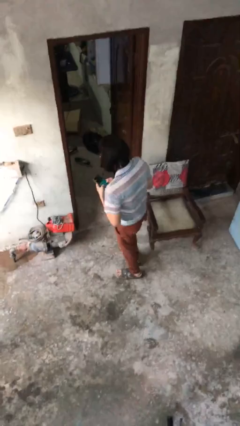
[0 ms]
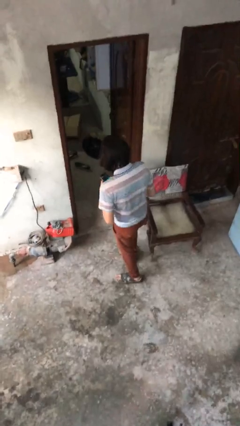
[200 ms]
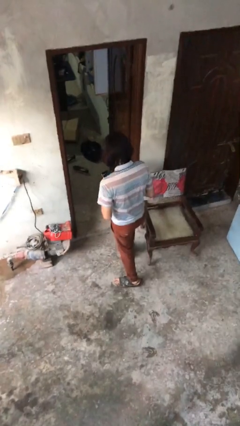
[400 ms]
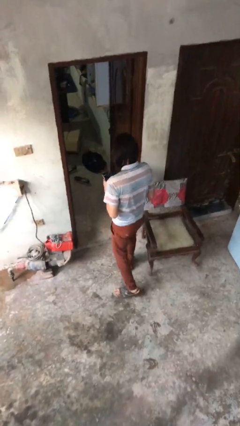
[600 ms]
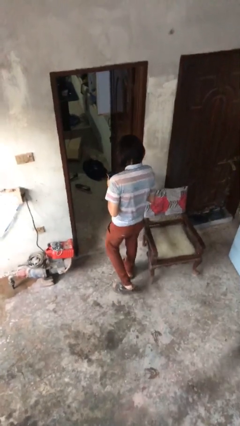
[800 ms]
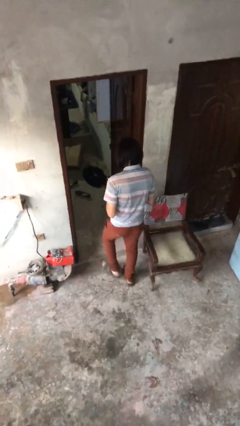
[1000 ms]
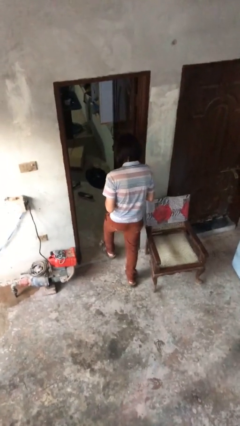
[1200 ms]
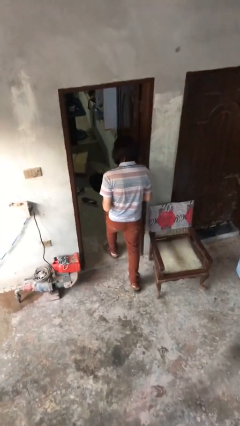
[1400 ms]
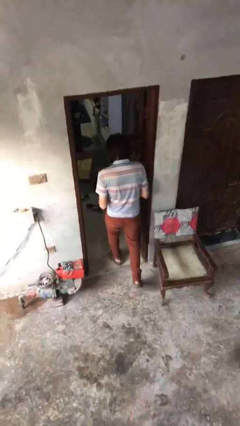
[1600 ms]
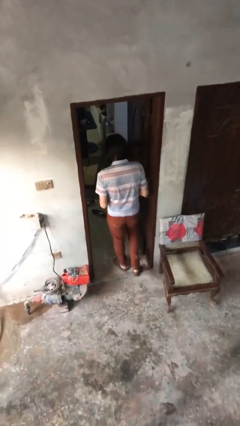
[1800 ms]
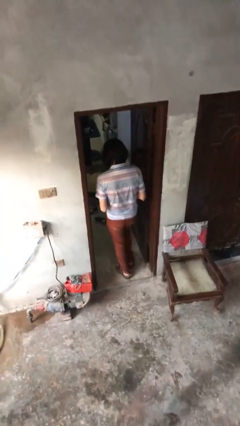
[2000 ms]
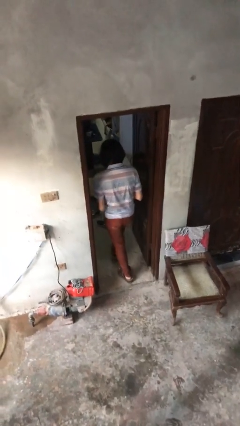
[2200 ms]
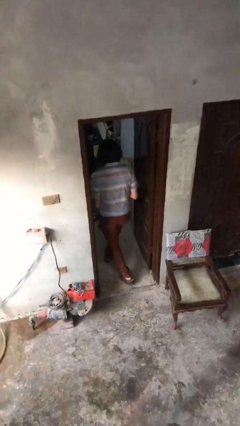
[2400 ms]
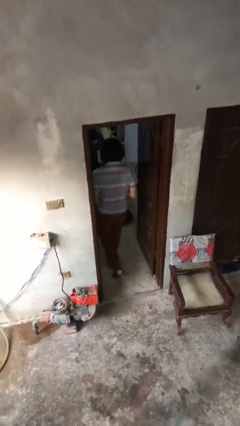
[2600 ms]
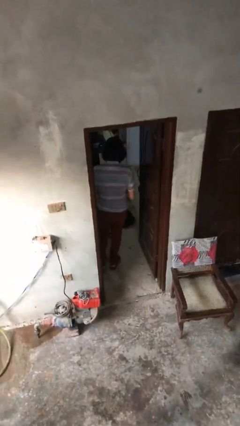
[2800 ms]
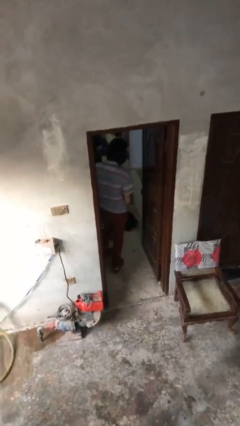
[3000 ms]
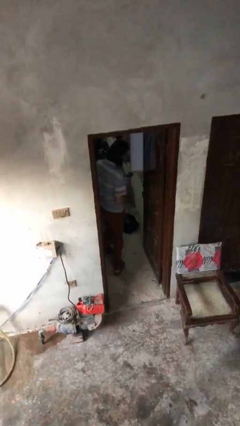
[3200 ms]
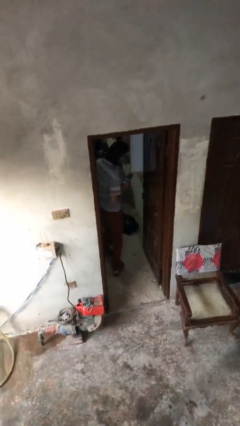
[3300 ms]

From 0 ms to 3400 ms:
person enters scene through structure

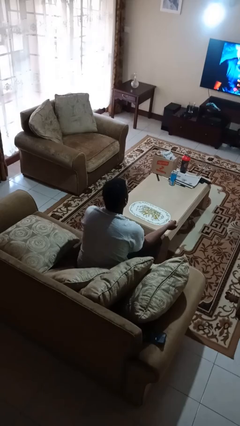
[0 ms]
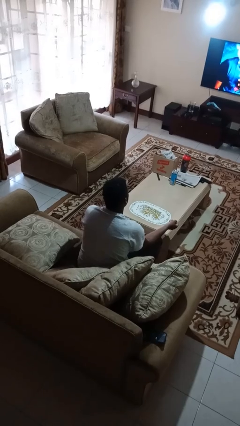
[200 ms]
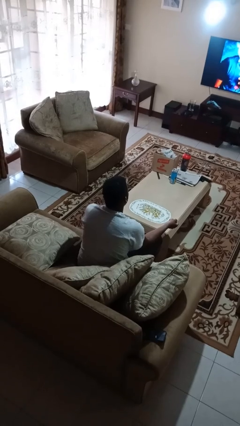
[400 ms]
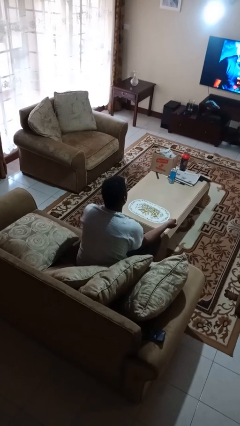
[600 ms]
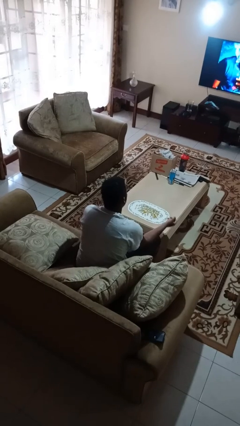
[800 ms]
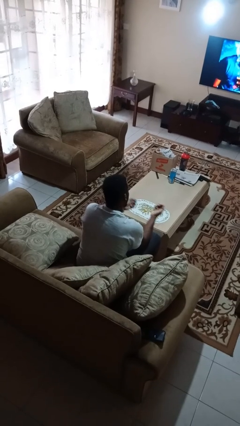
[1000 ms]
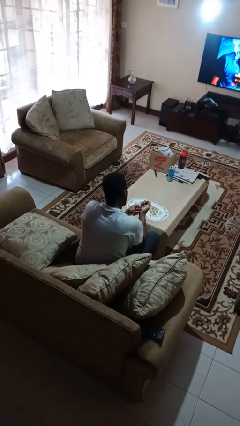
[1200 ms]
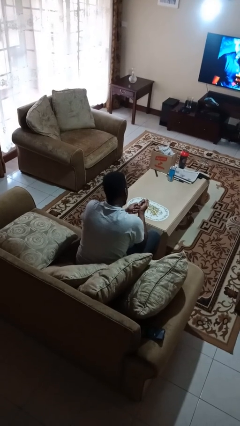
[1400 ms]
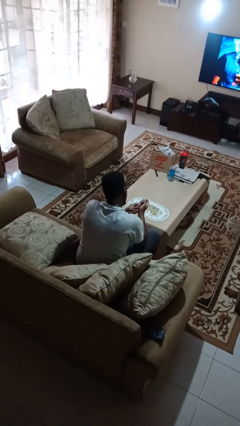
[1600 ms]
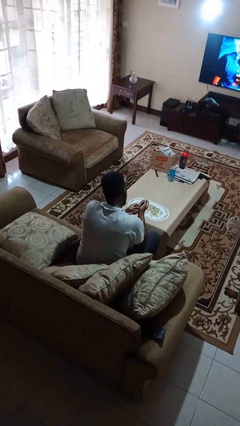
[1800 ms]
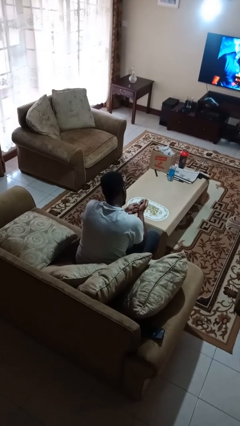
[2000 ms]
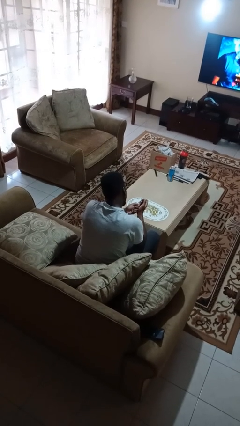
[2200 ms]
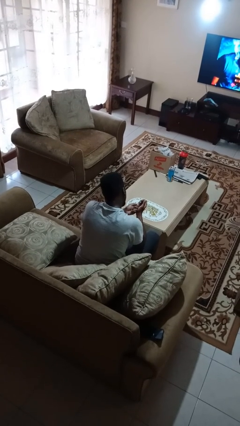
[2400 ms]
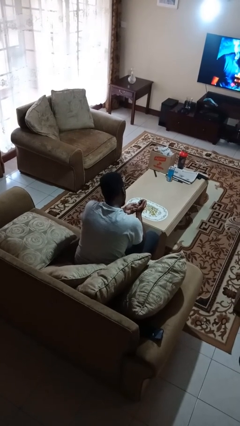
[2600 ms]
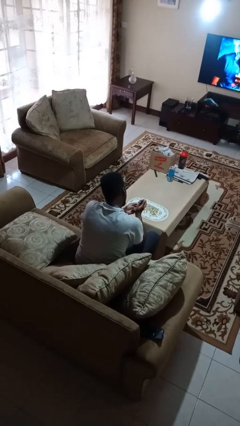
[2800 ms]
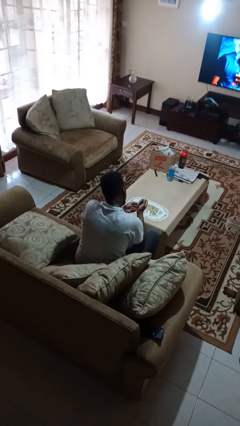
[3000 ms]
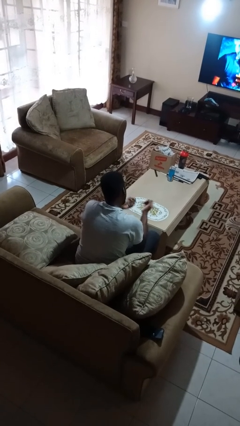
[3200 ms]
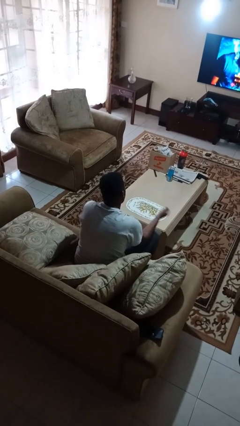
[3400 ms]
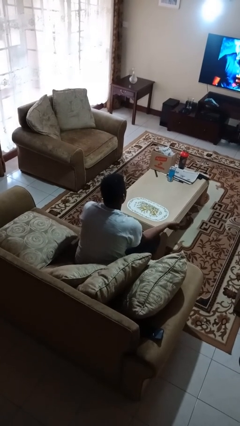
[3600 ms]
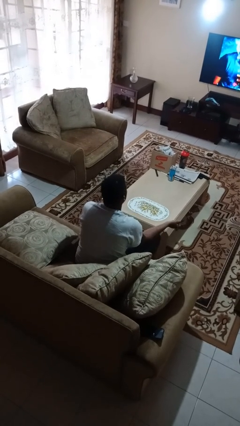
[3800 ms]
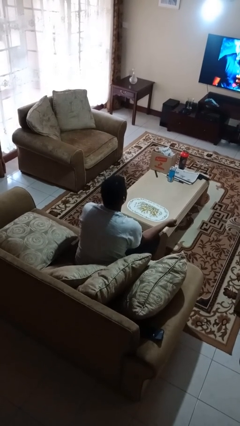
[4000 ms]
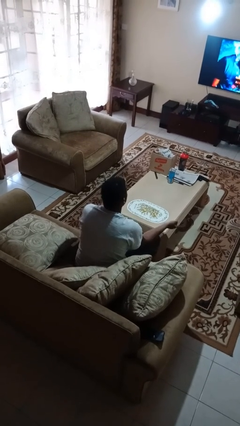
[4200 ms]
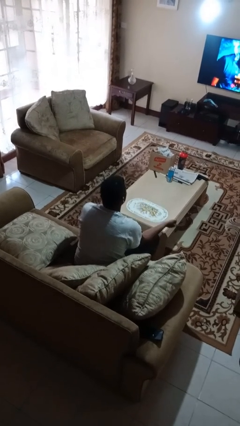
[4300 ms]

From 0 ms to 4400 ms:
person clips fingernails

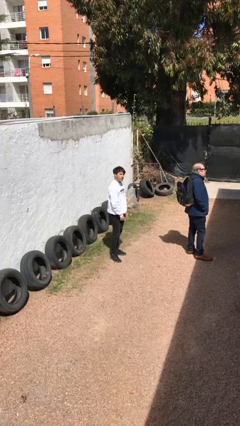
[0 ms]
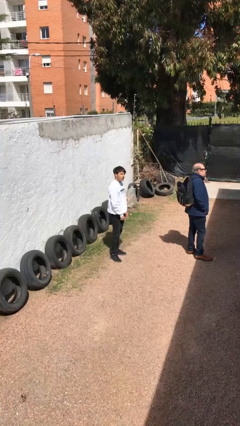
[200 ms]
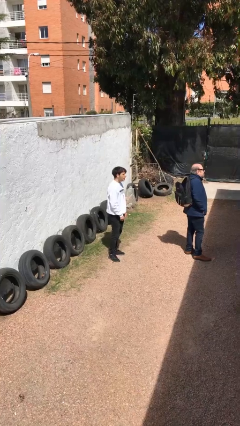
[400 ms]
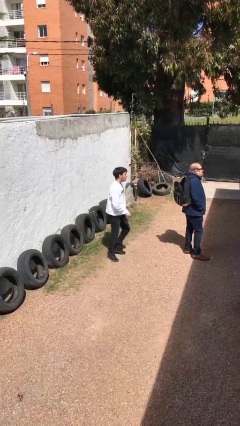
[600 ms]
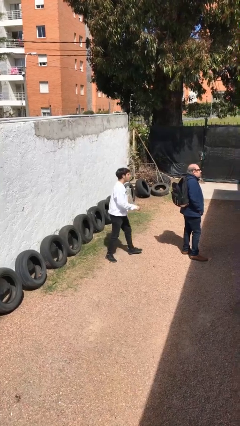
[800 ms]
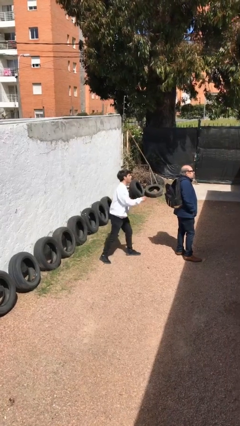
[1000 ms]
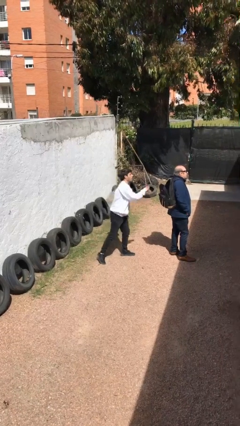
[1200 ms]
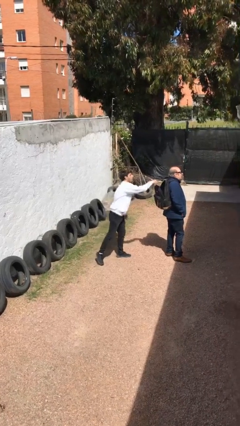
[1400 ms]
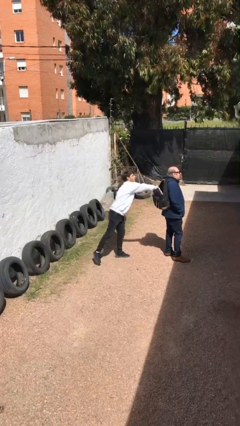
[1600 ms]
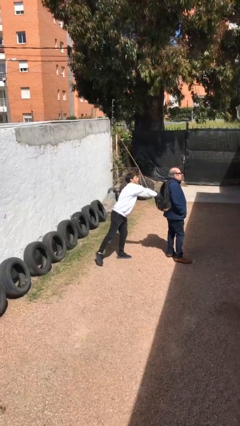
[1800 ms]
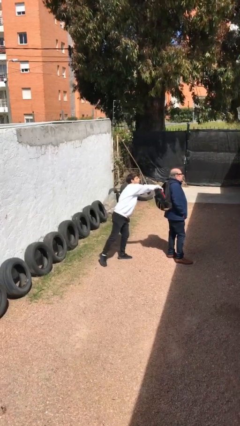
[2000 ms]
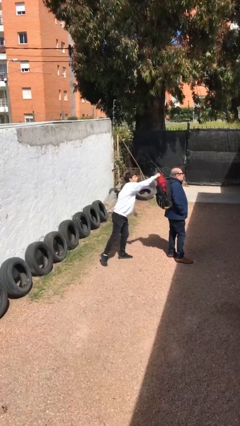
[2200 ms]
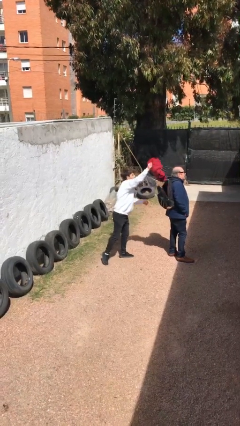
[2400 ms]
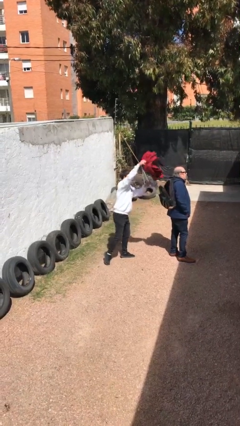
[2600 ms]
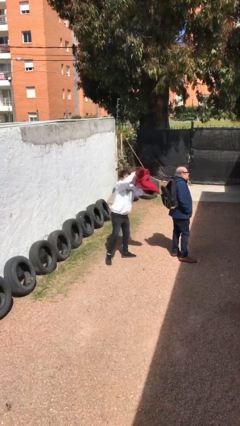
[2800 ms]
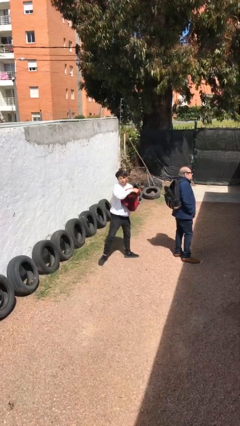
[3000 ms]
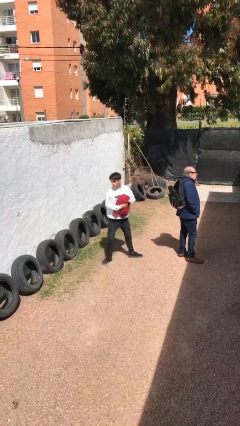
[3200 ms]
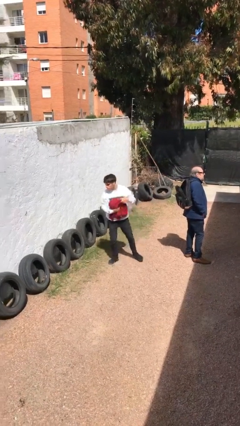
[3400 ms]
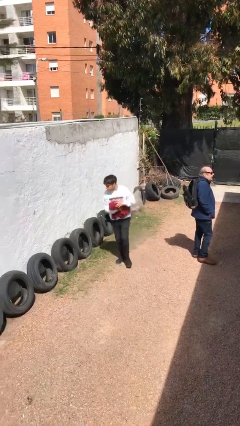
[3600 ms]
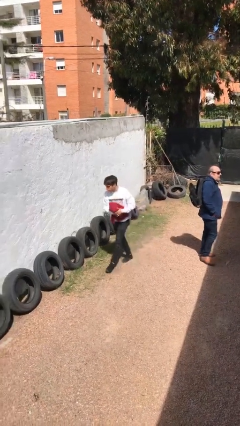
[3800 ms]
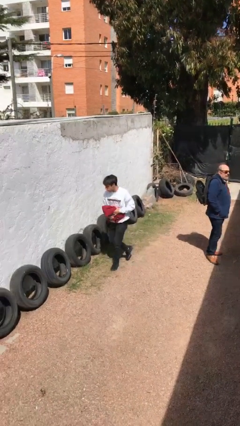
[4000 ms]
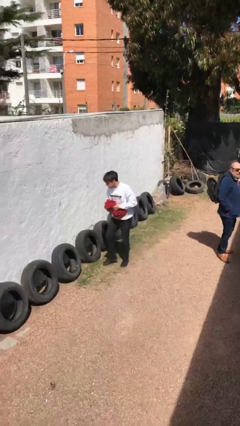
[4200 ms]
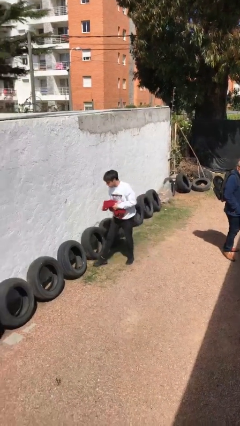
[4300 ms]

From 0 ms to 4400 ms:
person steals object from person

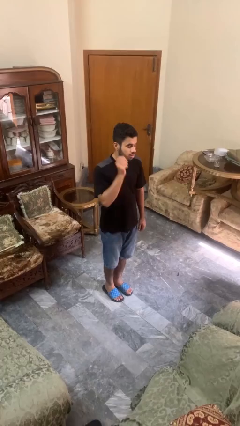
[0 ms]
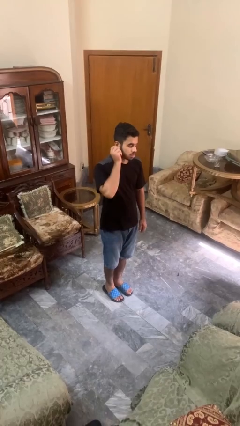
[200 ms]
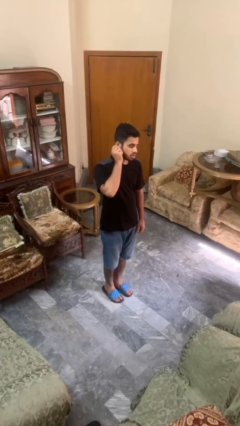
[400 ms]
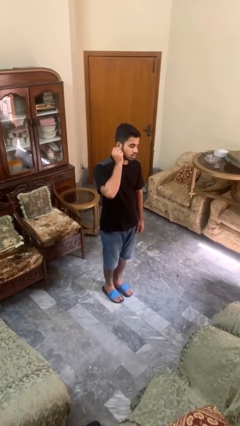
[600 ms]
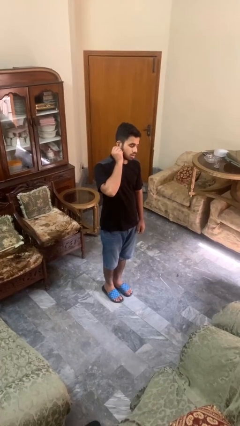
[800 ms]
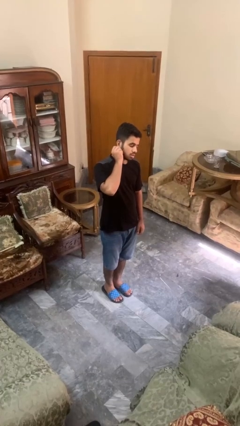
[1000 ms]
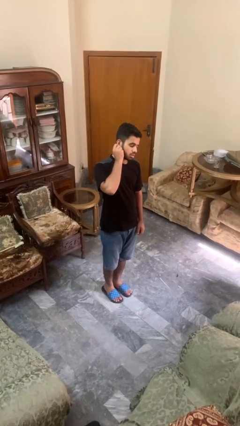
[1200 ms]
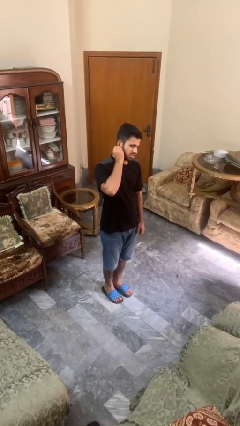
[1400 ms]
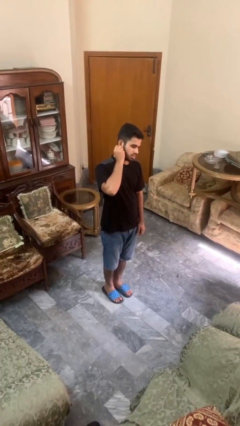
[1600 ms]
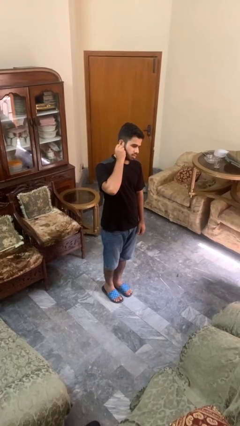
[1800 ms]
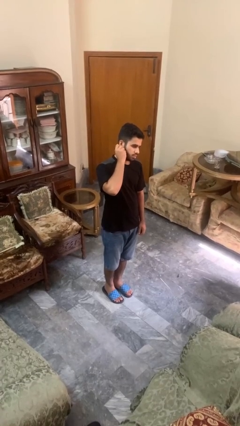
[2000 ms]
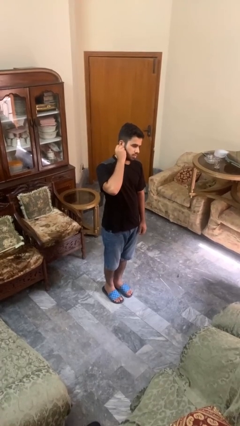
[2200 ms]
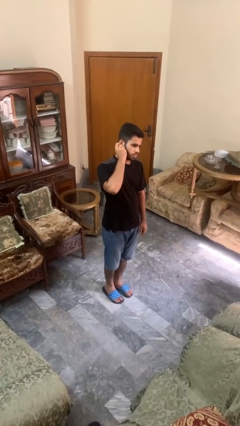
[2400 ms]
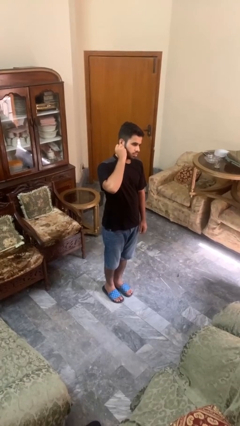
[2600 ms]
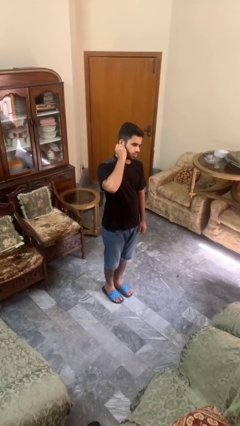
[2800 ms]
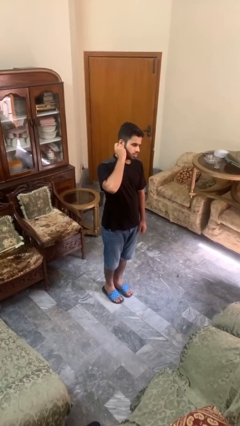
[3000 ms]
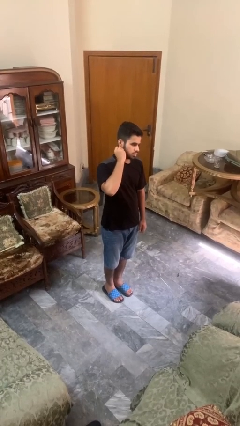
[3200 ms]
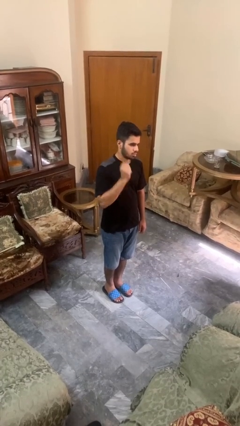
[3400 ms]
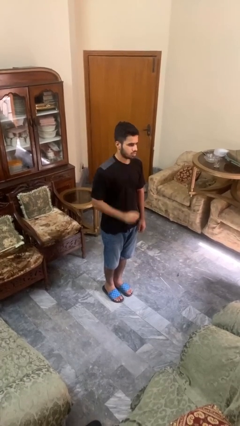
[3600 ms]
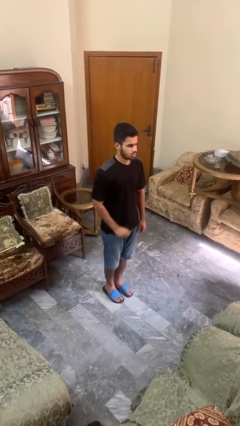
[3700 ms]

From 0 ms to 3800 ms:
person touches earlobe

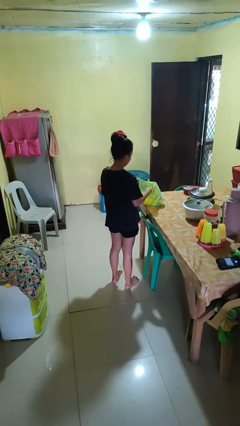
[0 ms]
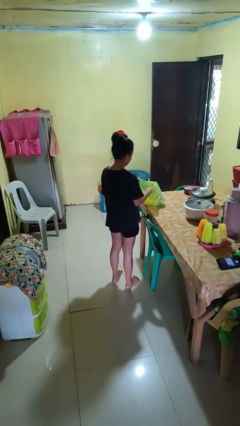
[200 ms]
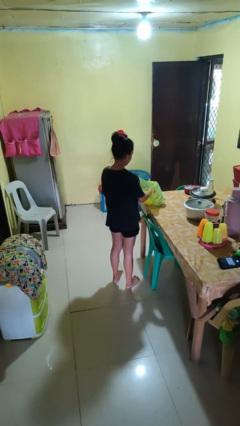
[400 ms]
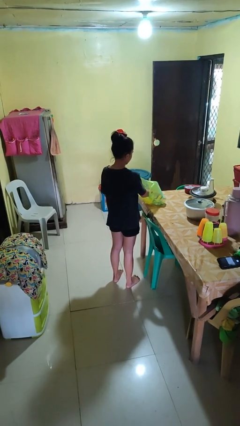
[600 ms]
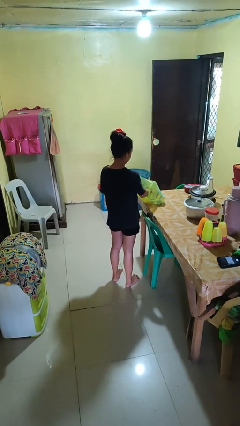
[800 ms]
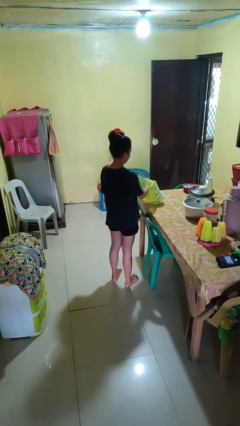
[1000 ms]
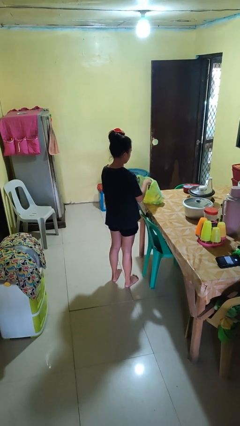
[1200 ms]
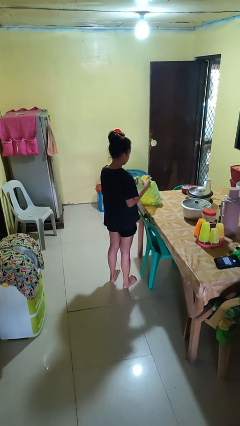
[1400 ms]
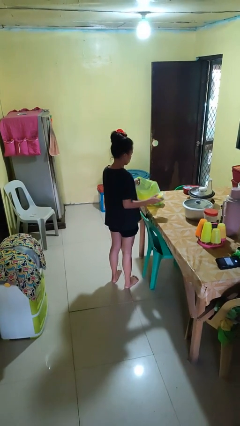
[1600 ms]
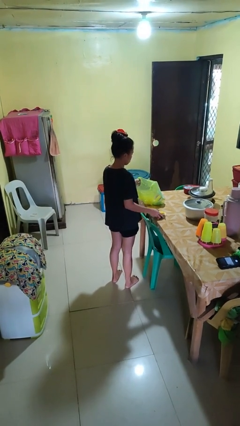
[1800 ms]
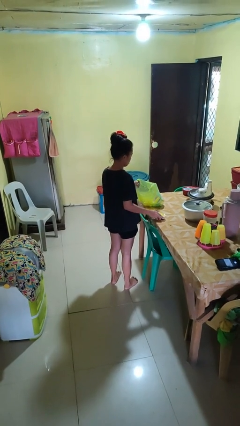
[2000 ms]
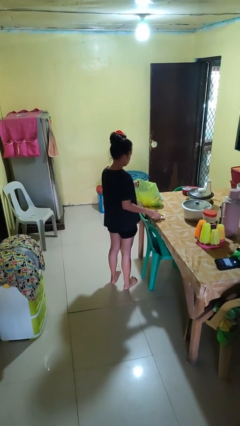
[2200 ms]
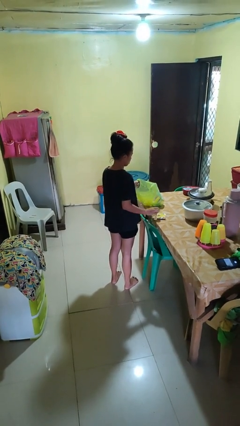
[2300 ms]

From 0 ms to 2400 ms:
person takes object from bag
